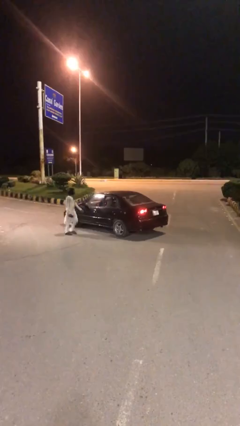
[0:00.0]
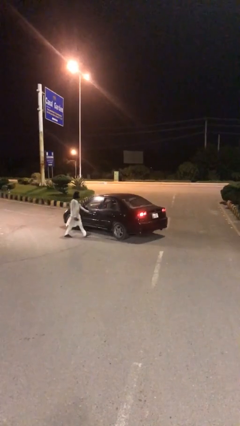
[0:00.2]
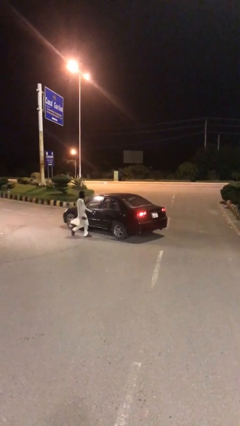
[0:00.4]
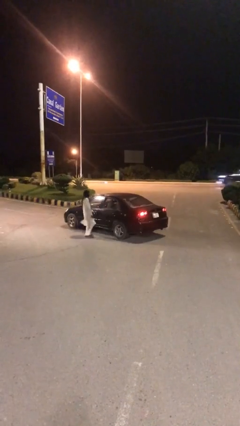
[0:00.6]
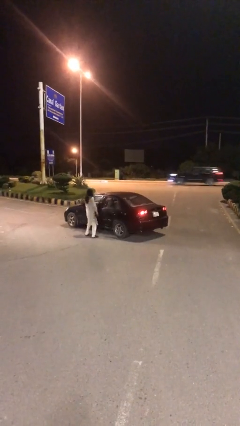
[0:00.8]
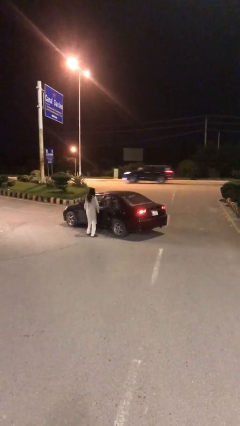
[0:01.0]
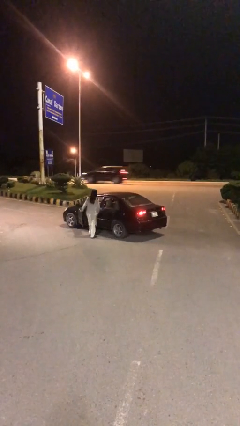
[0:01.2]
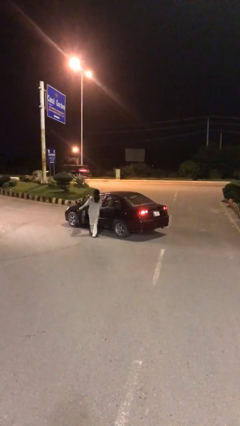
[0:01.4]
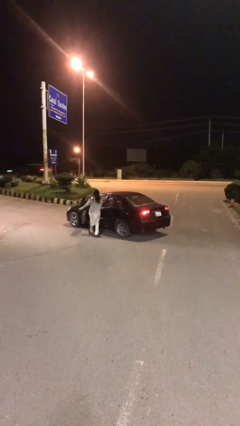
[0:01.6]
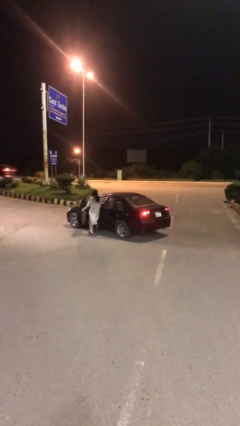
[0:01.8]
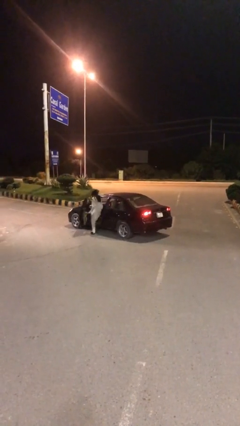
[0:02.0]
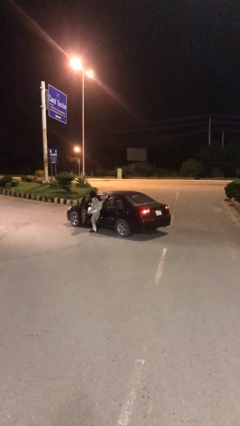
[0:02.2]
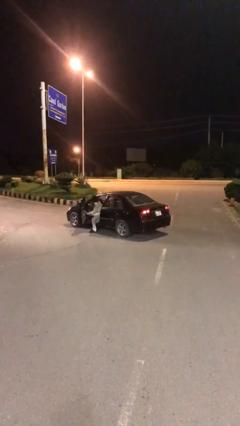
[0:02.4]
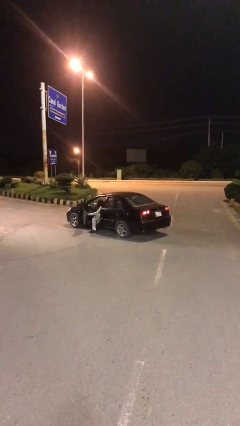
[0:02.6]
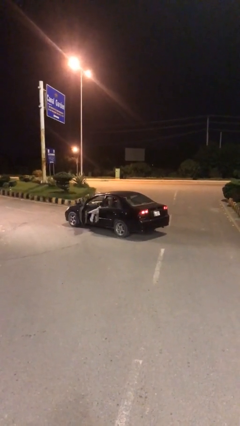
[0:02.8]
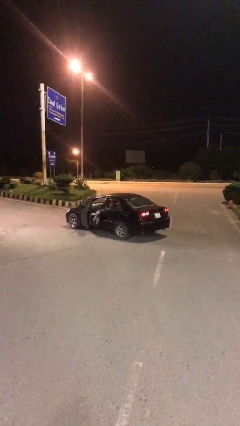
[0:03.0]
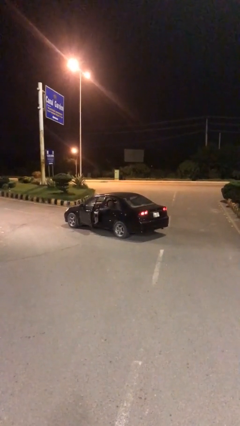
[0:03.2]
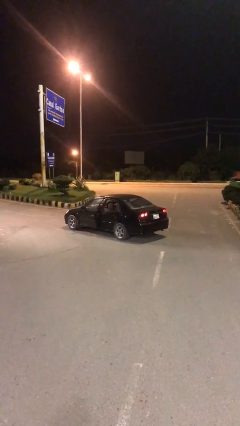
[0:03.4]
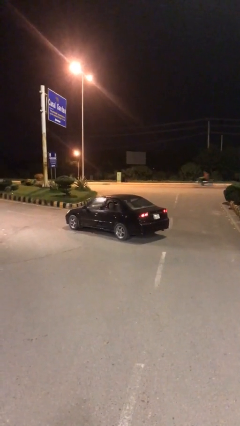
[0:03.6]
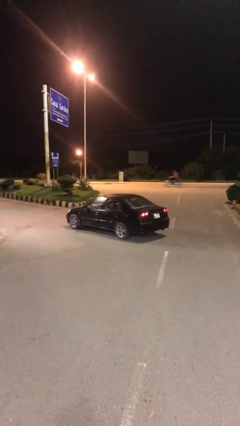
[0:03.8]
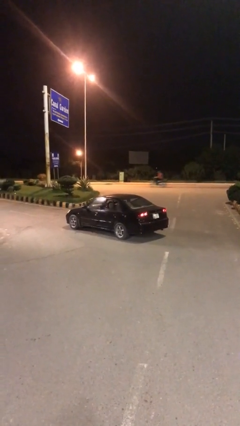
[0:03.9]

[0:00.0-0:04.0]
car picks up person

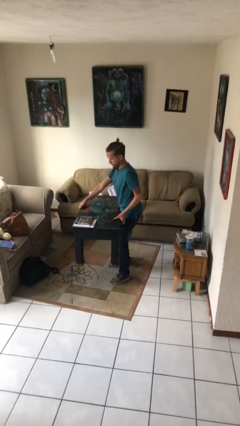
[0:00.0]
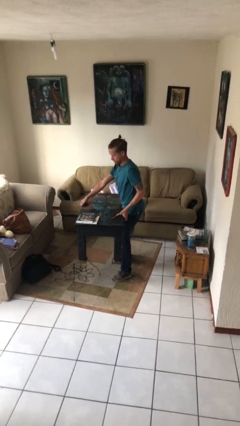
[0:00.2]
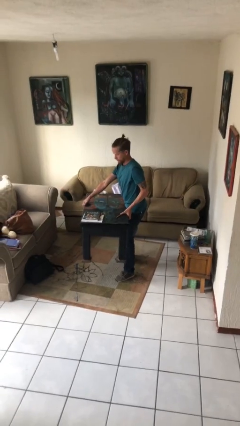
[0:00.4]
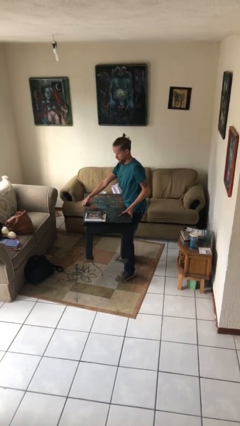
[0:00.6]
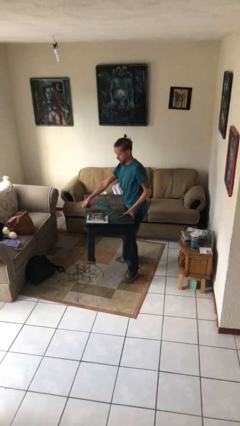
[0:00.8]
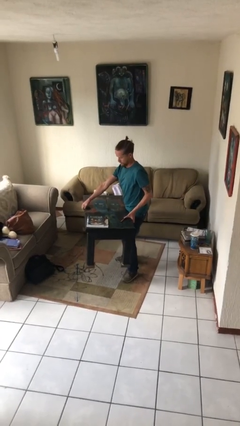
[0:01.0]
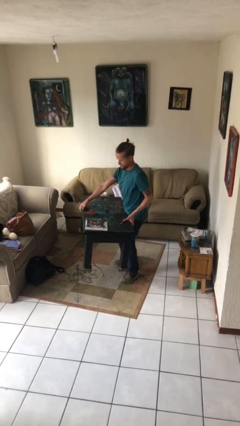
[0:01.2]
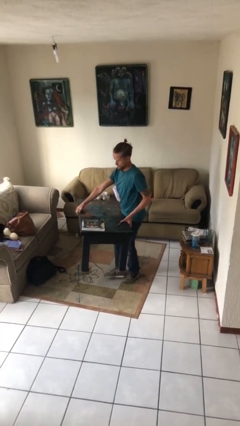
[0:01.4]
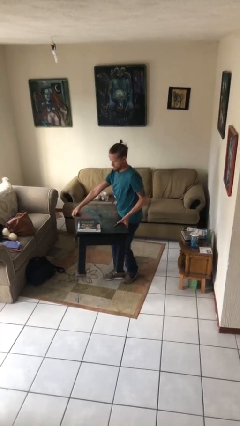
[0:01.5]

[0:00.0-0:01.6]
person carries heavy object

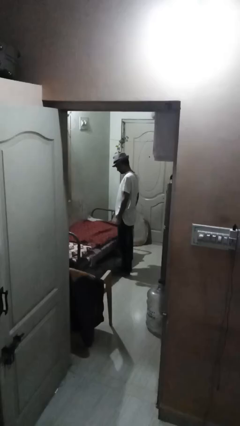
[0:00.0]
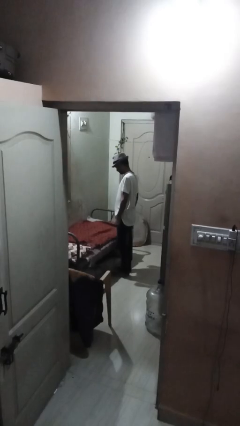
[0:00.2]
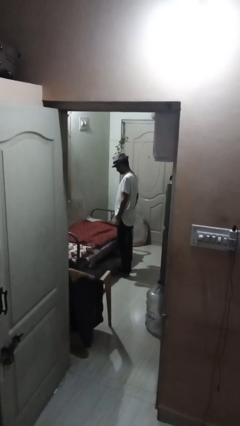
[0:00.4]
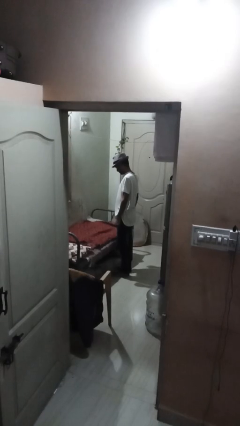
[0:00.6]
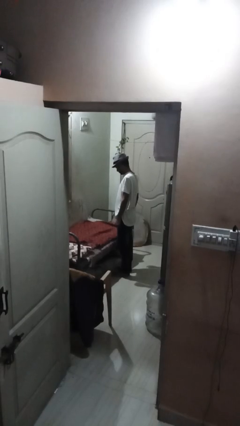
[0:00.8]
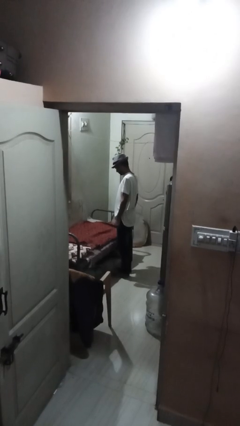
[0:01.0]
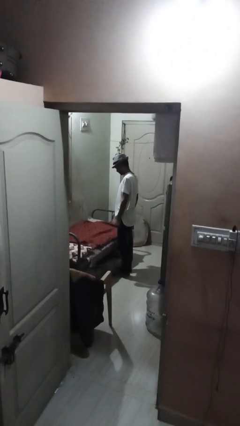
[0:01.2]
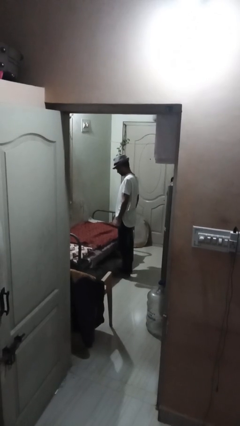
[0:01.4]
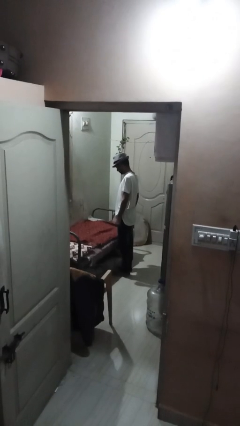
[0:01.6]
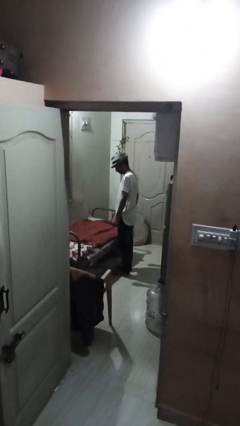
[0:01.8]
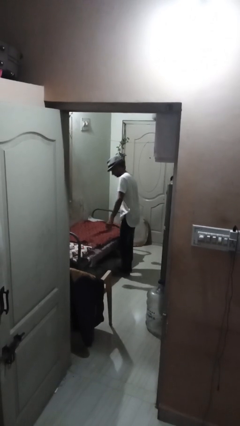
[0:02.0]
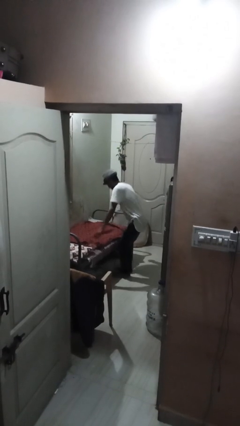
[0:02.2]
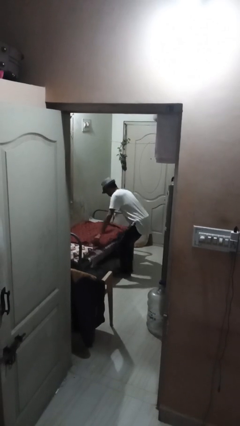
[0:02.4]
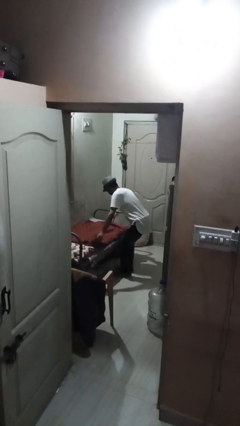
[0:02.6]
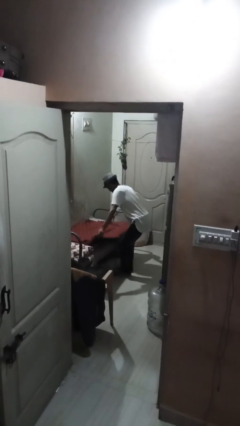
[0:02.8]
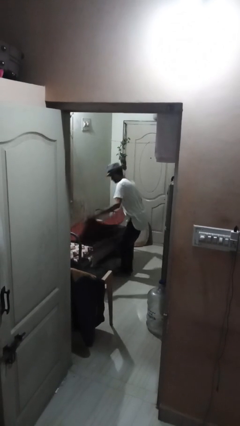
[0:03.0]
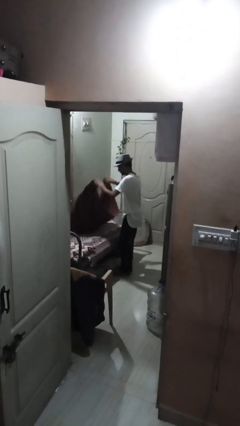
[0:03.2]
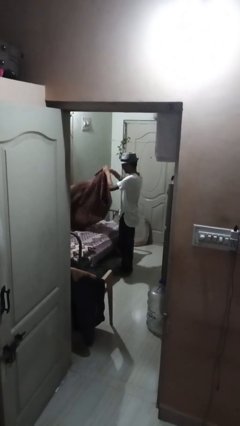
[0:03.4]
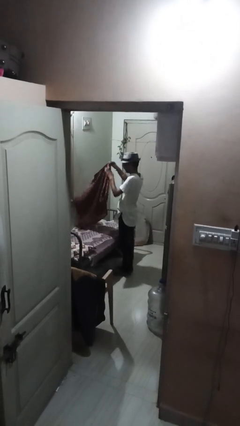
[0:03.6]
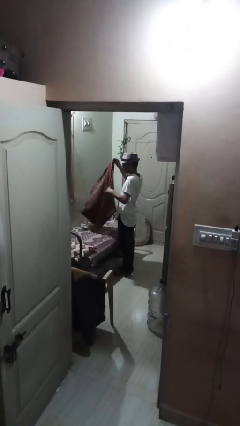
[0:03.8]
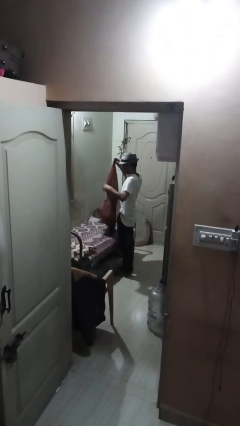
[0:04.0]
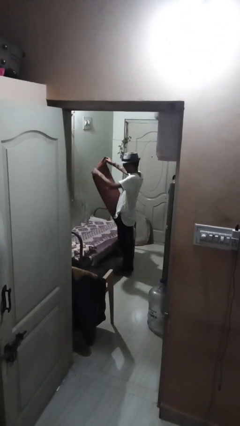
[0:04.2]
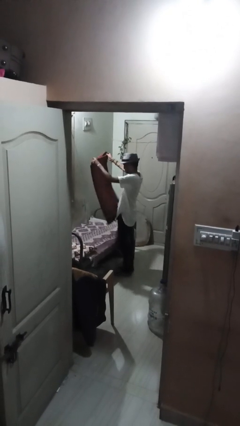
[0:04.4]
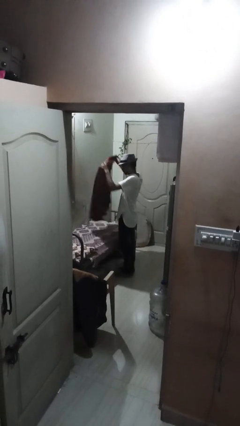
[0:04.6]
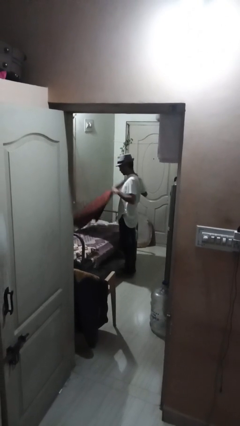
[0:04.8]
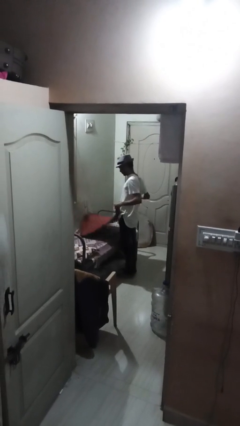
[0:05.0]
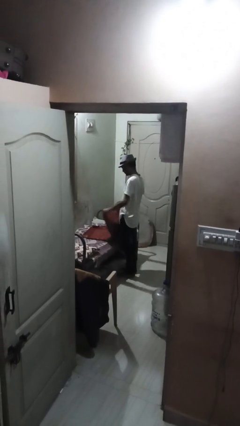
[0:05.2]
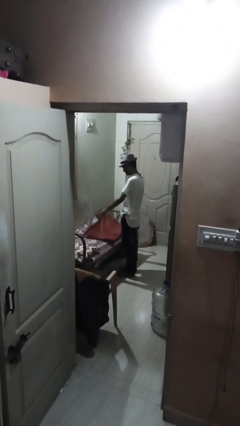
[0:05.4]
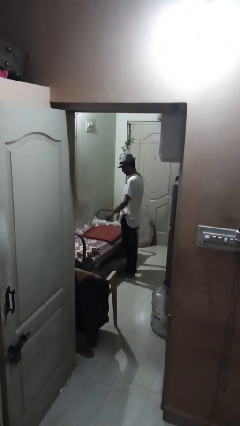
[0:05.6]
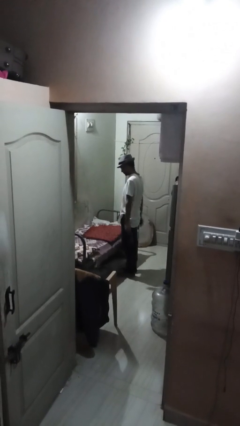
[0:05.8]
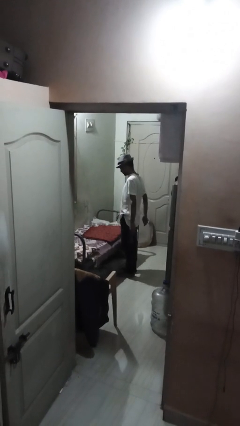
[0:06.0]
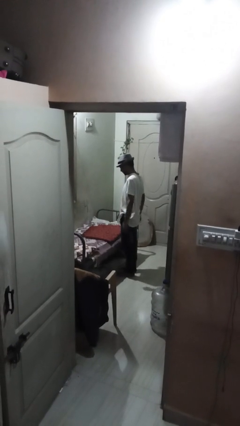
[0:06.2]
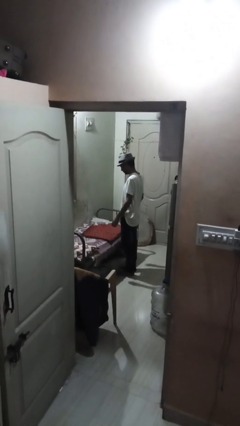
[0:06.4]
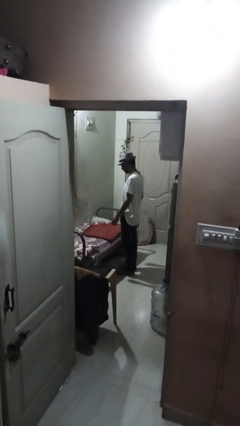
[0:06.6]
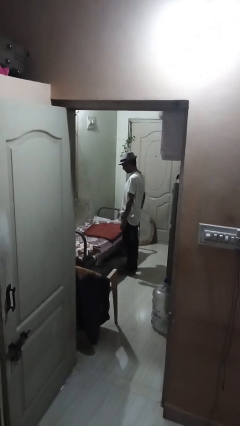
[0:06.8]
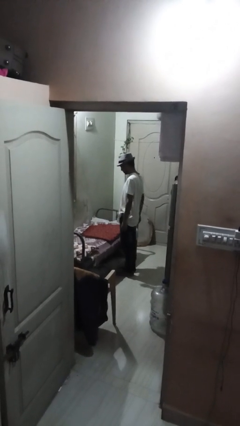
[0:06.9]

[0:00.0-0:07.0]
person folds blanket

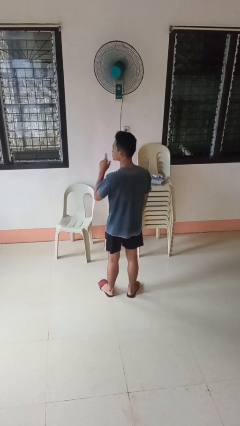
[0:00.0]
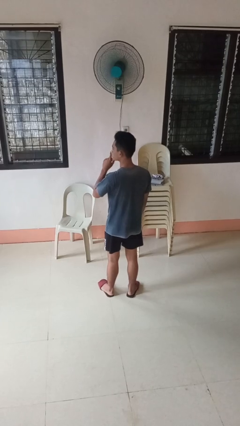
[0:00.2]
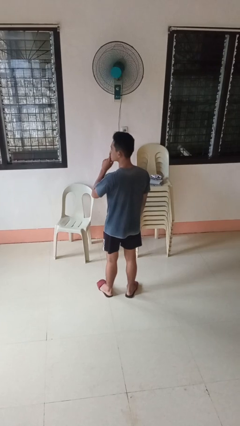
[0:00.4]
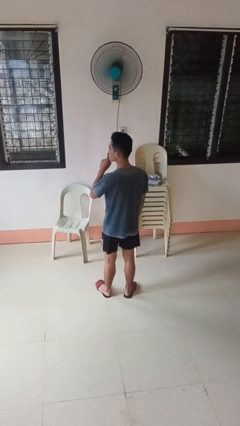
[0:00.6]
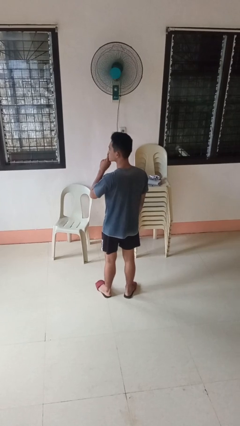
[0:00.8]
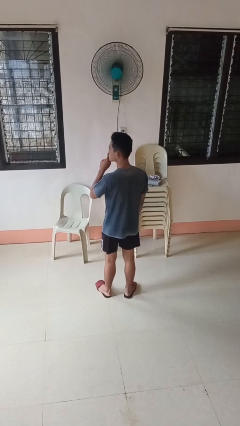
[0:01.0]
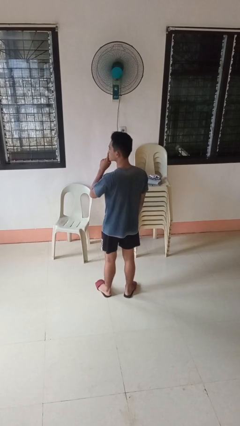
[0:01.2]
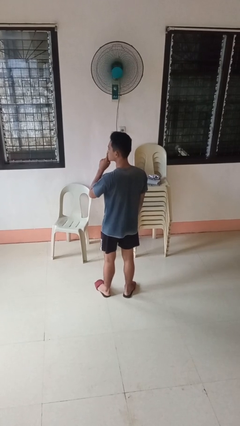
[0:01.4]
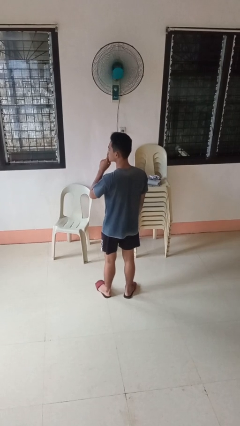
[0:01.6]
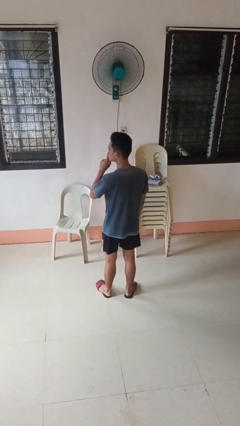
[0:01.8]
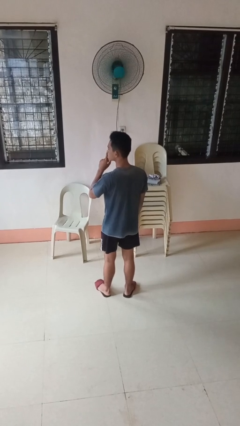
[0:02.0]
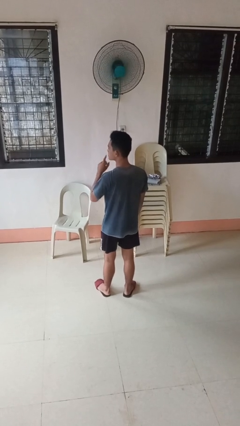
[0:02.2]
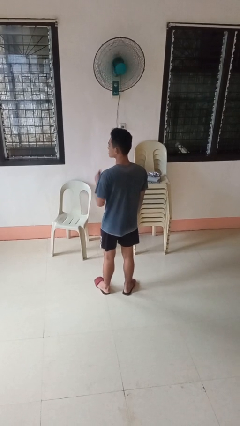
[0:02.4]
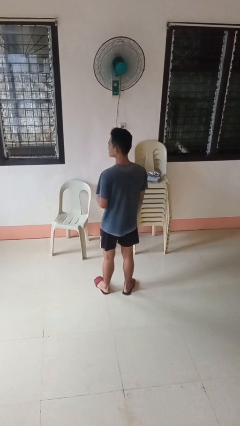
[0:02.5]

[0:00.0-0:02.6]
person gestures be quiet

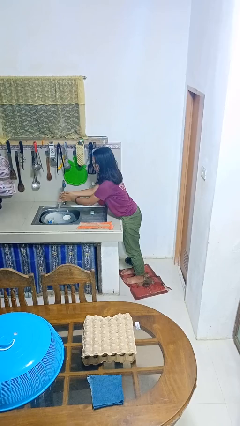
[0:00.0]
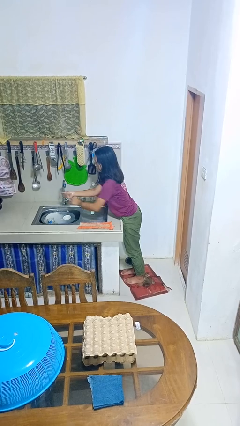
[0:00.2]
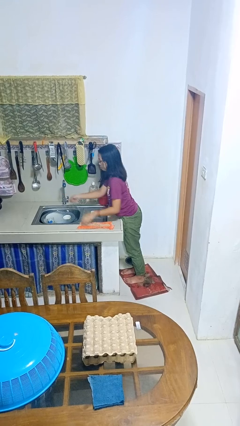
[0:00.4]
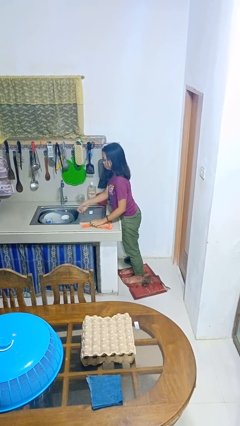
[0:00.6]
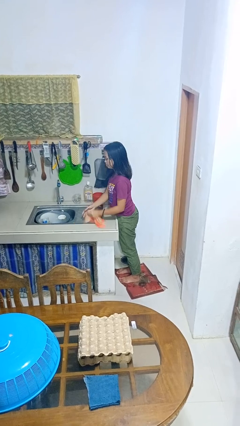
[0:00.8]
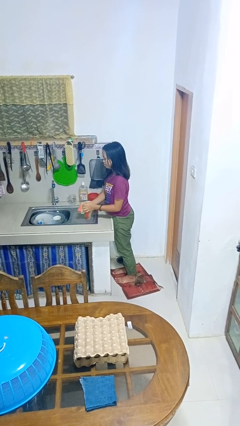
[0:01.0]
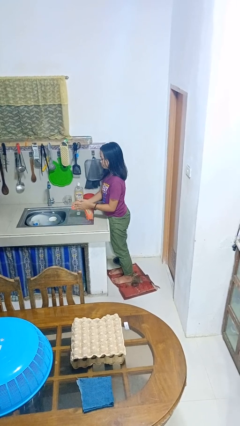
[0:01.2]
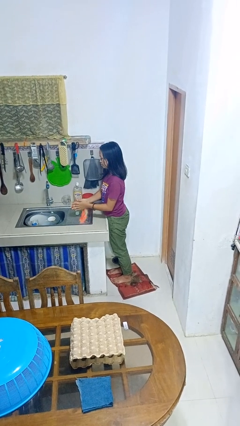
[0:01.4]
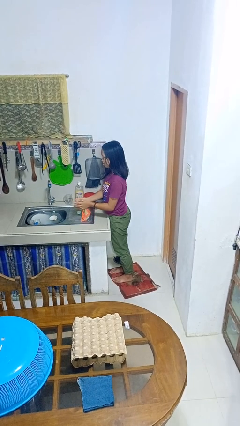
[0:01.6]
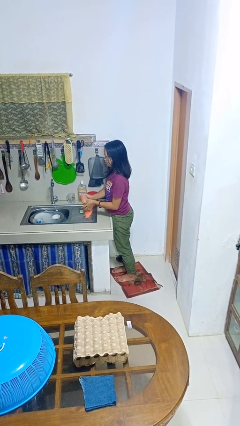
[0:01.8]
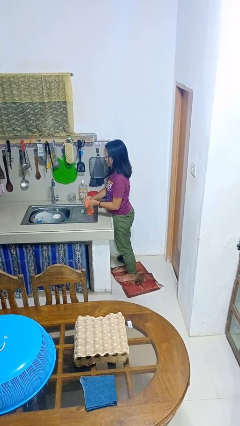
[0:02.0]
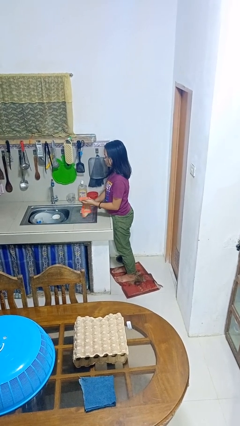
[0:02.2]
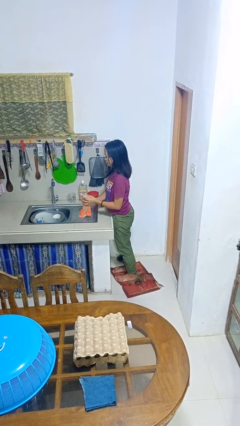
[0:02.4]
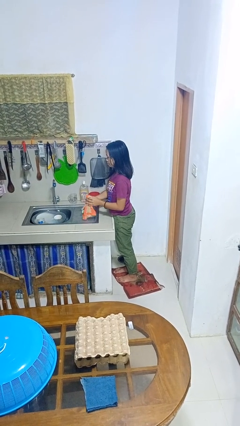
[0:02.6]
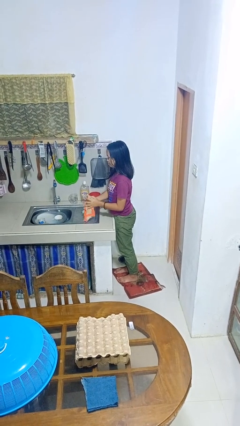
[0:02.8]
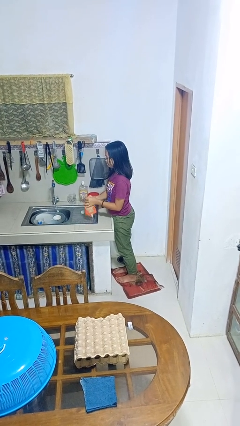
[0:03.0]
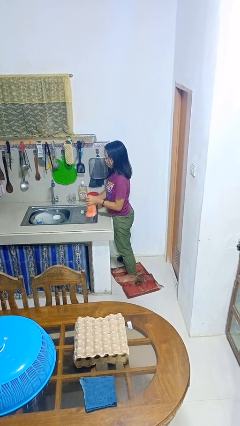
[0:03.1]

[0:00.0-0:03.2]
person dries hands with towel
